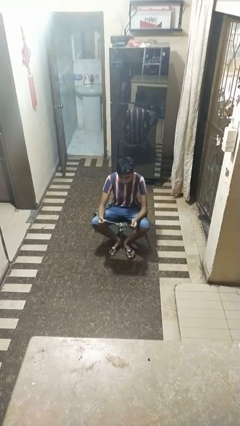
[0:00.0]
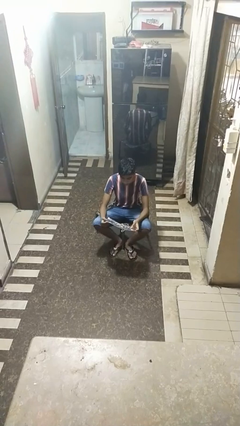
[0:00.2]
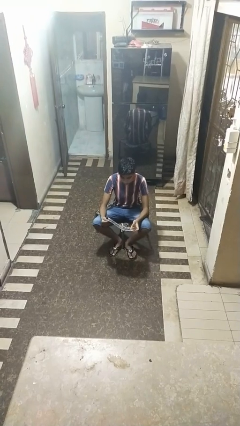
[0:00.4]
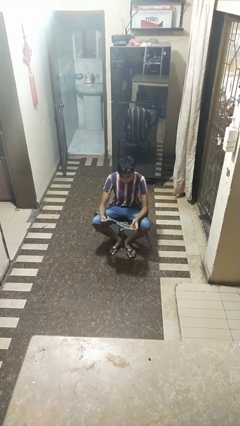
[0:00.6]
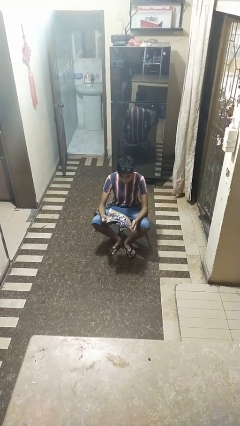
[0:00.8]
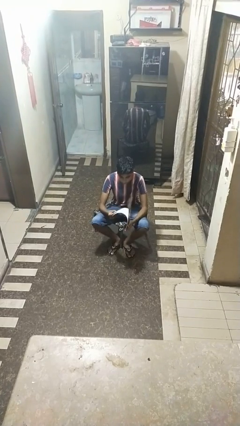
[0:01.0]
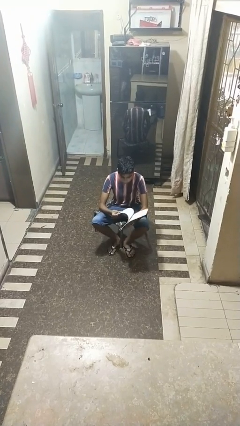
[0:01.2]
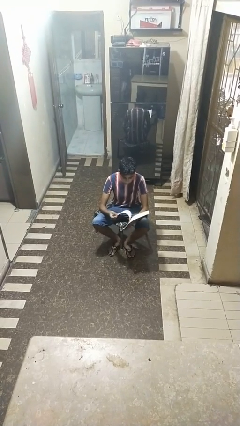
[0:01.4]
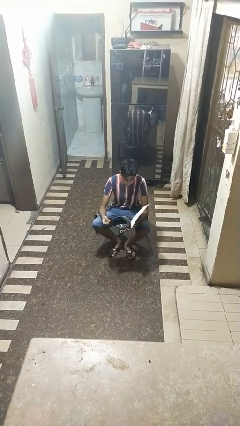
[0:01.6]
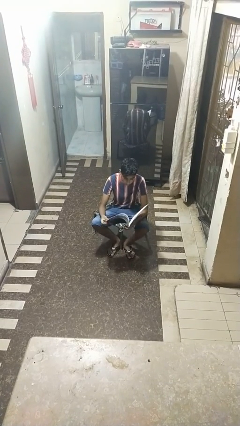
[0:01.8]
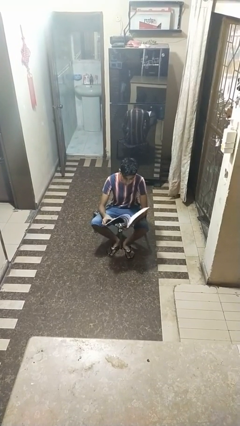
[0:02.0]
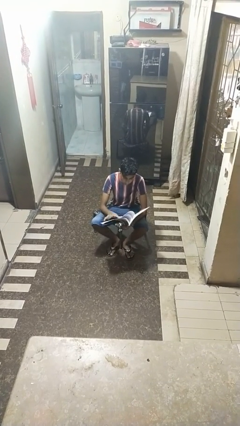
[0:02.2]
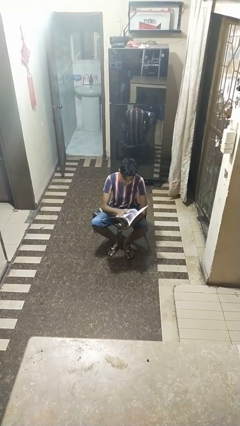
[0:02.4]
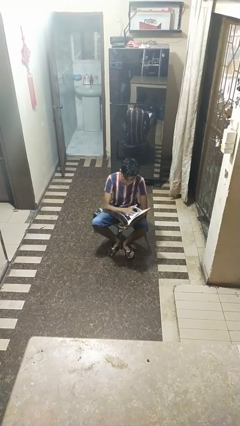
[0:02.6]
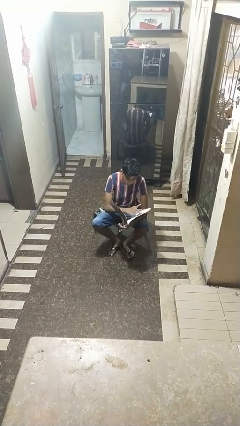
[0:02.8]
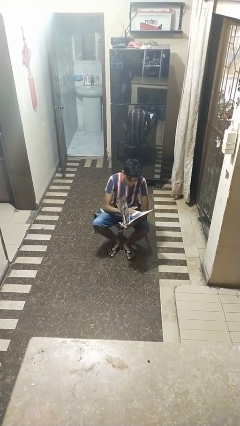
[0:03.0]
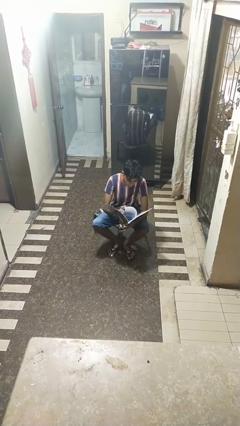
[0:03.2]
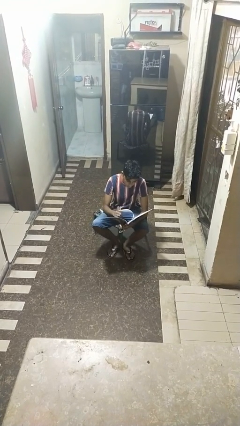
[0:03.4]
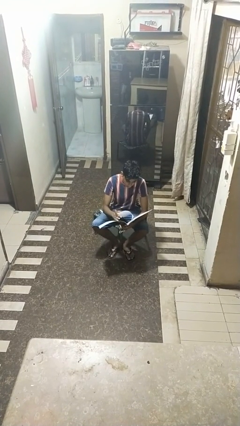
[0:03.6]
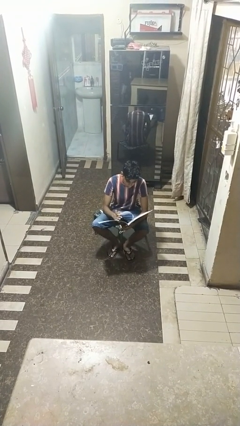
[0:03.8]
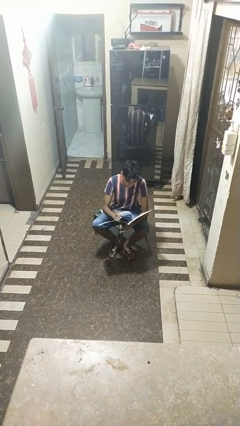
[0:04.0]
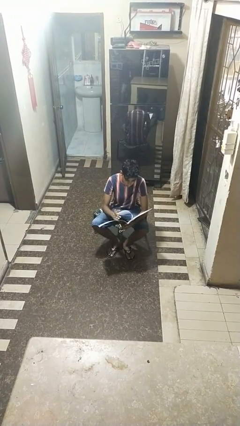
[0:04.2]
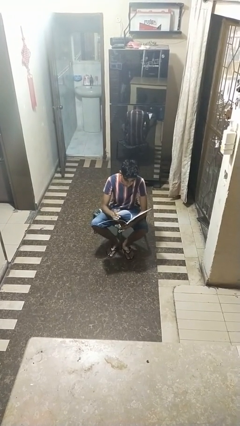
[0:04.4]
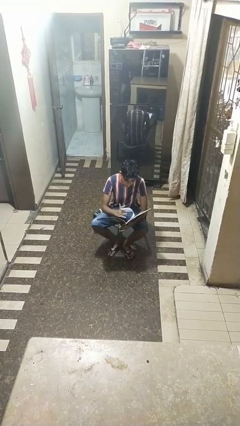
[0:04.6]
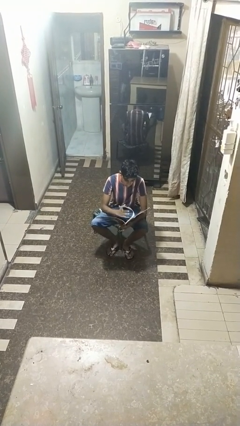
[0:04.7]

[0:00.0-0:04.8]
person reads magazine

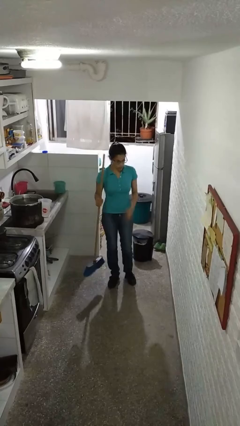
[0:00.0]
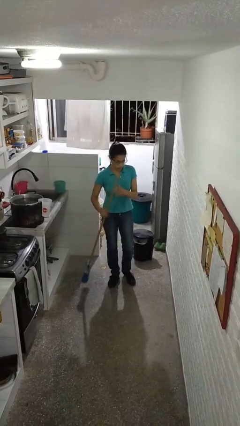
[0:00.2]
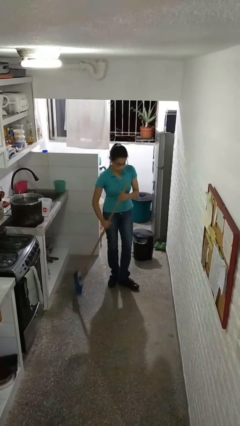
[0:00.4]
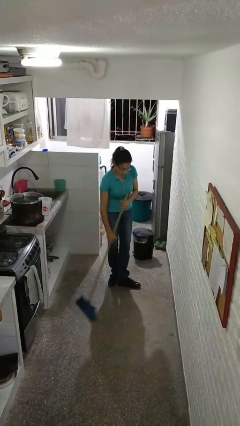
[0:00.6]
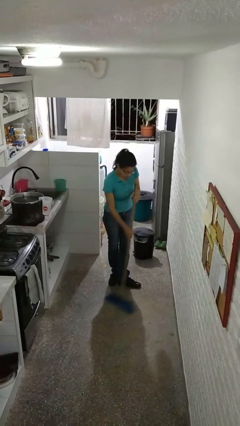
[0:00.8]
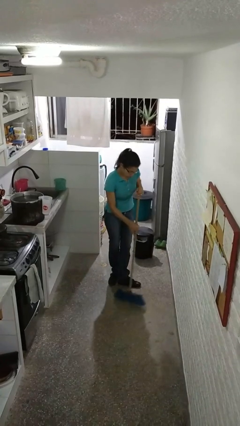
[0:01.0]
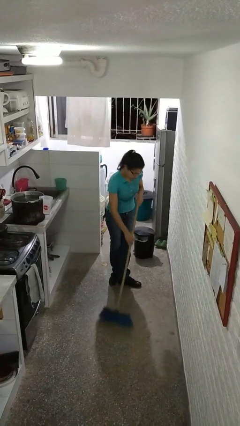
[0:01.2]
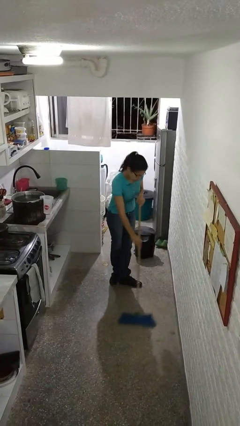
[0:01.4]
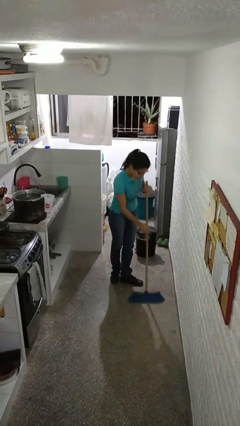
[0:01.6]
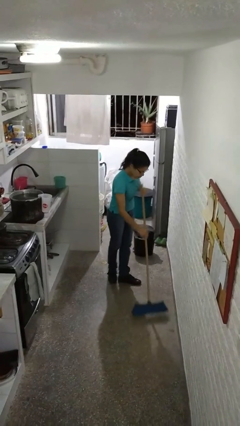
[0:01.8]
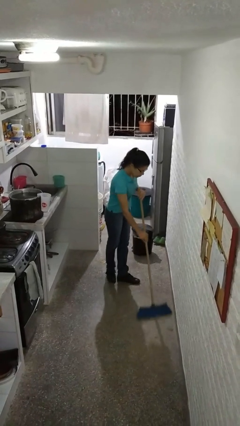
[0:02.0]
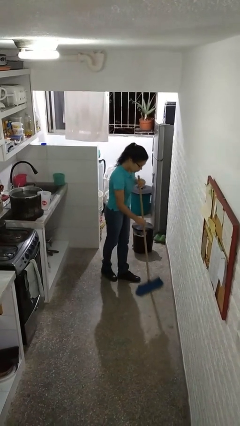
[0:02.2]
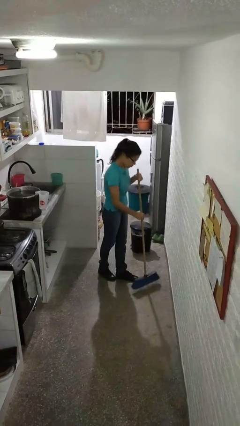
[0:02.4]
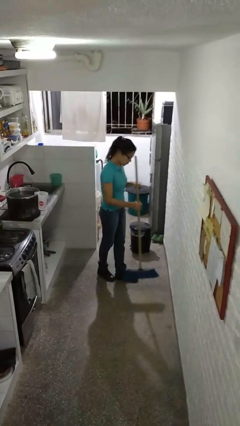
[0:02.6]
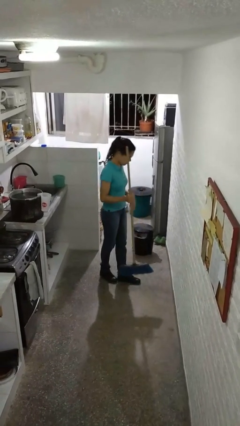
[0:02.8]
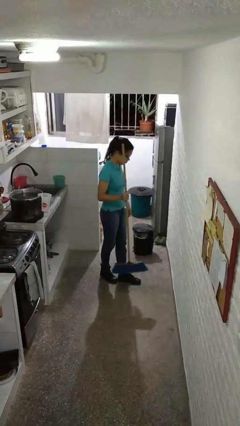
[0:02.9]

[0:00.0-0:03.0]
person sweeps floor

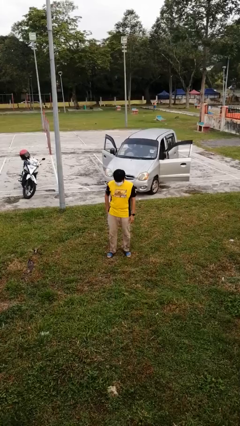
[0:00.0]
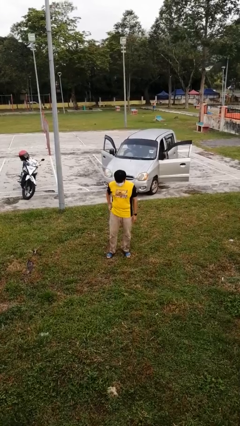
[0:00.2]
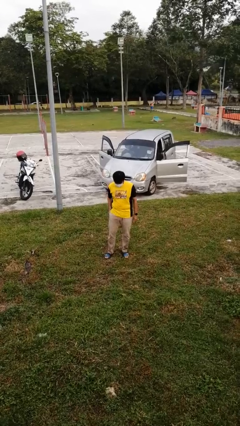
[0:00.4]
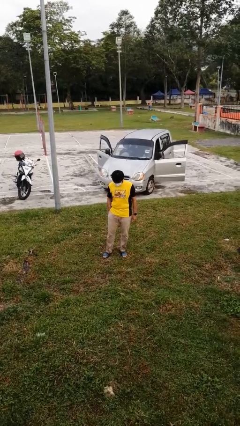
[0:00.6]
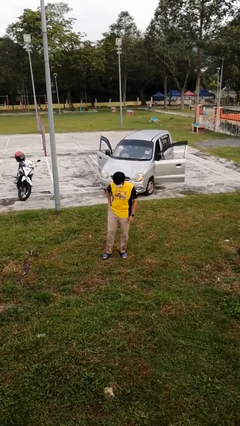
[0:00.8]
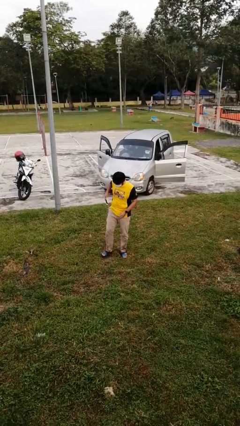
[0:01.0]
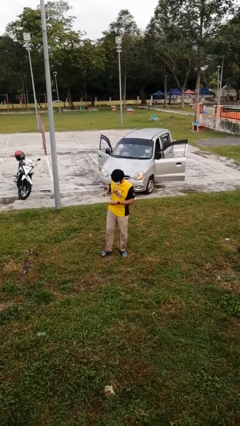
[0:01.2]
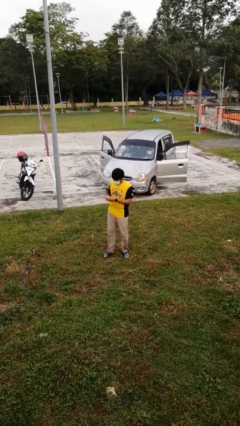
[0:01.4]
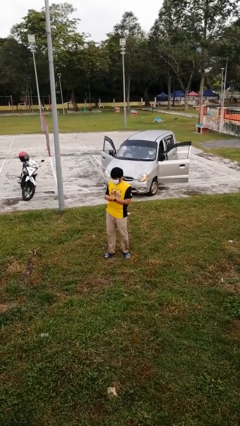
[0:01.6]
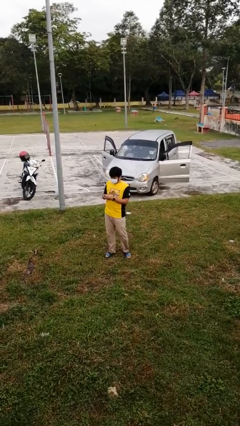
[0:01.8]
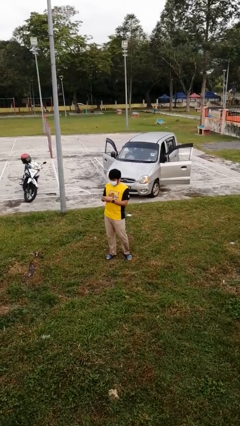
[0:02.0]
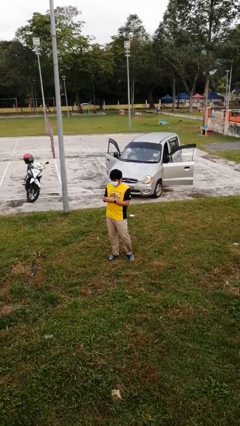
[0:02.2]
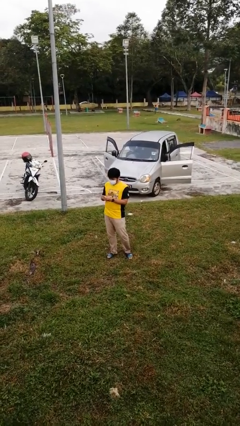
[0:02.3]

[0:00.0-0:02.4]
person takes phone from pocket

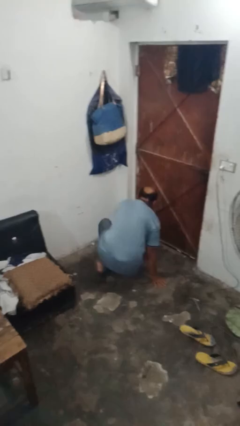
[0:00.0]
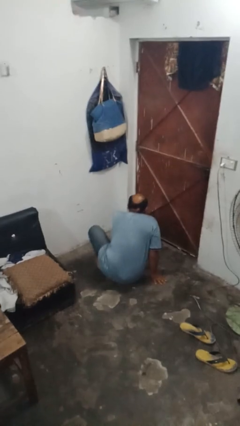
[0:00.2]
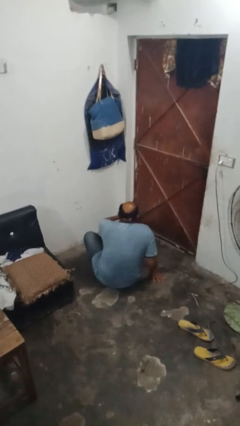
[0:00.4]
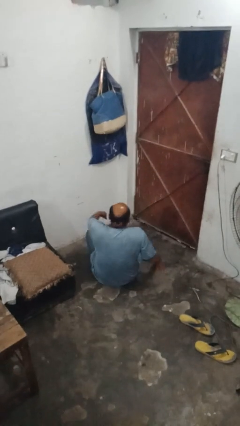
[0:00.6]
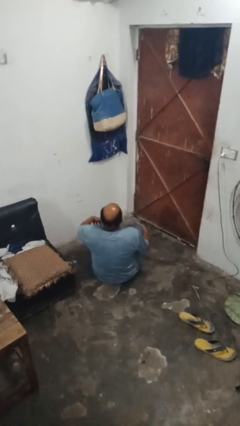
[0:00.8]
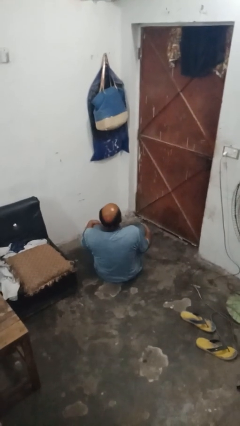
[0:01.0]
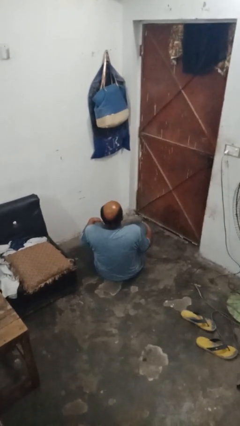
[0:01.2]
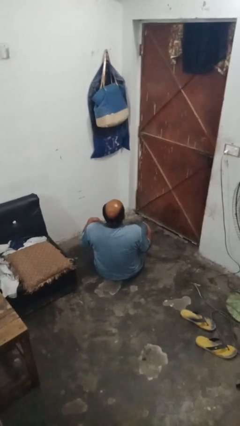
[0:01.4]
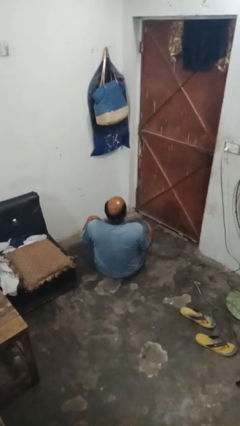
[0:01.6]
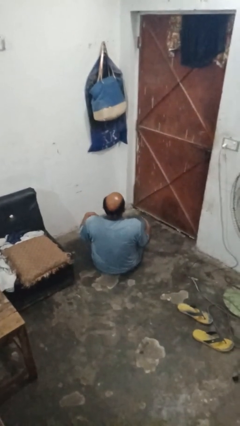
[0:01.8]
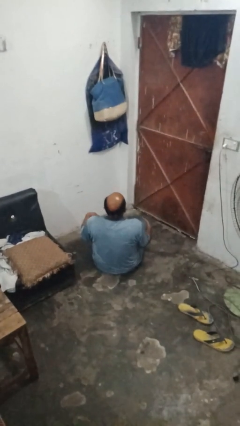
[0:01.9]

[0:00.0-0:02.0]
person sits crisscross

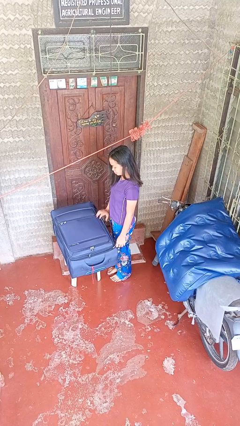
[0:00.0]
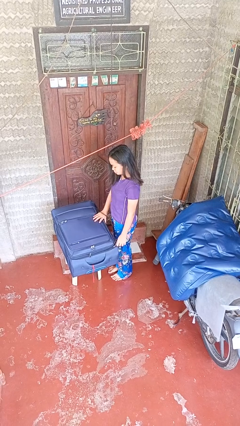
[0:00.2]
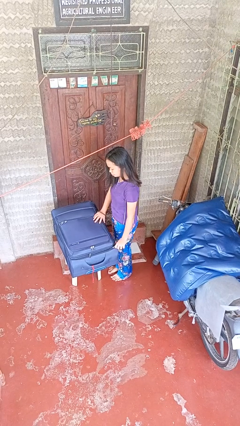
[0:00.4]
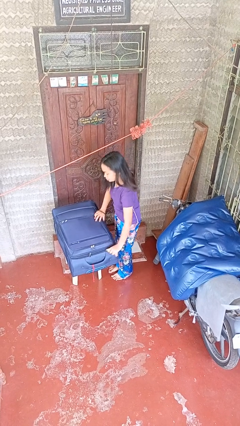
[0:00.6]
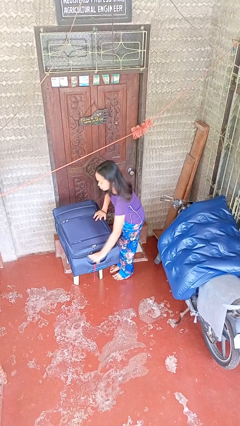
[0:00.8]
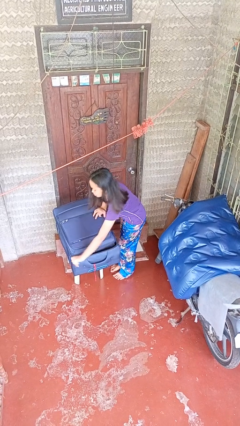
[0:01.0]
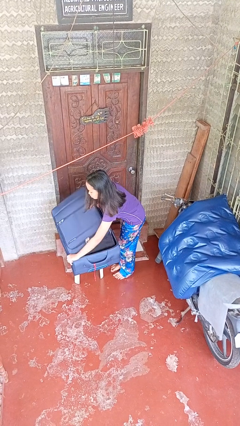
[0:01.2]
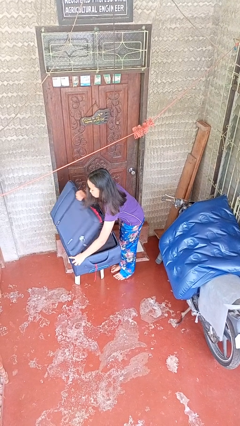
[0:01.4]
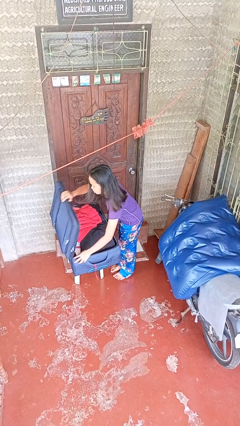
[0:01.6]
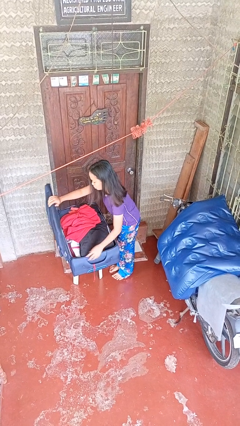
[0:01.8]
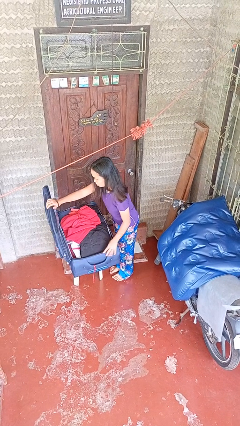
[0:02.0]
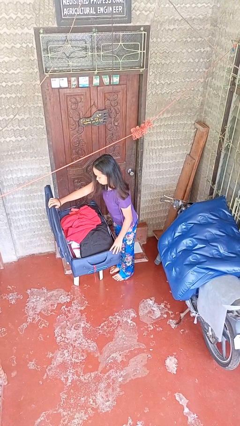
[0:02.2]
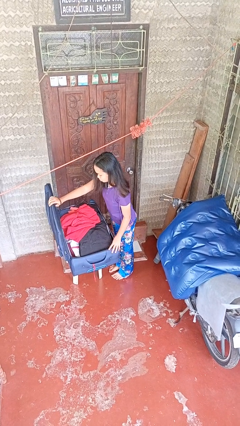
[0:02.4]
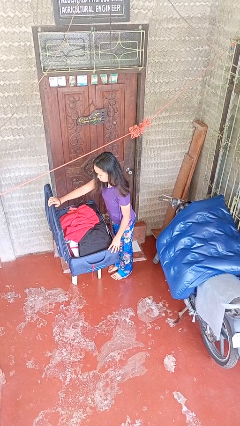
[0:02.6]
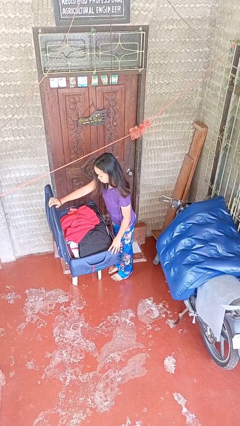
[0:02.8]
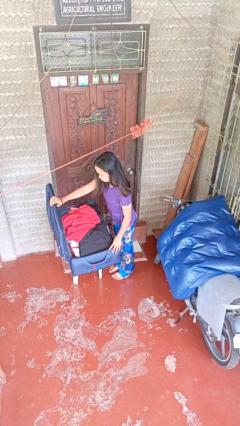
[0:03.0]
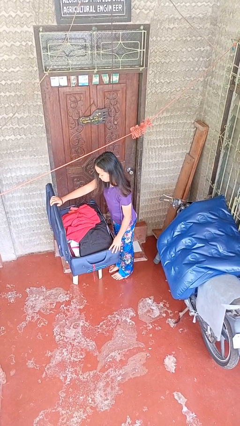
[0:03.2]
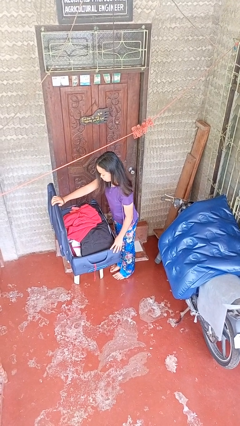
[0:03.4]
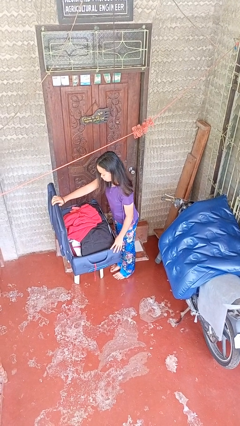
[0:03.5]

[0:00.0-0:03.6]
person opens suitcase

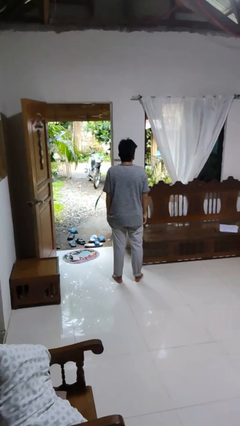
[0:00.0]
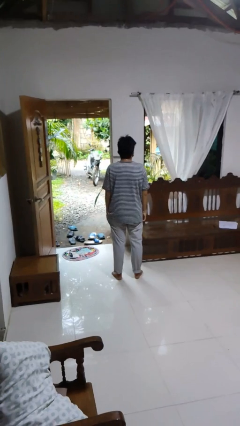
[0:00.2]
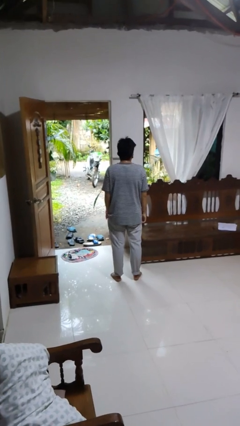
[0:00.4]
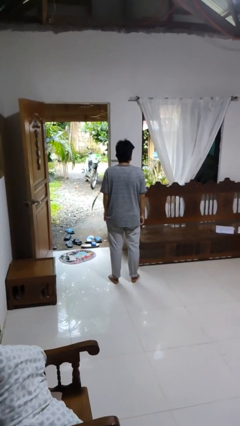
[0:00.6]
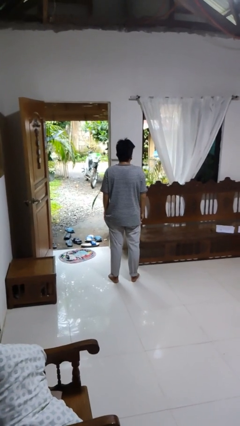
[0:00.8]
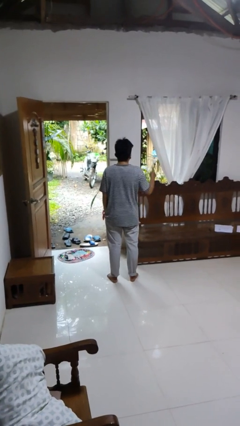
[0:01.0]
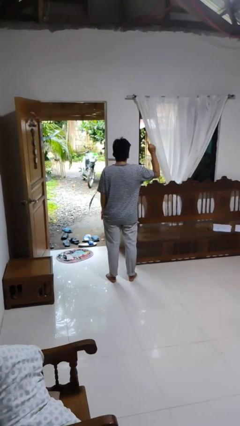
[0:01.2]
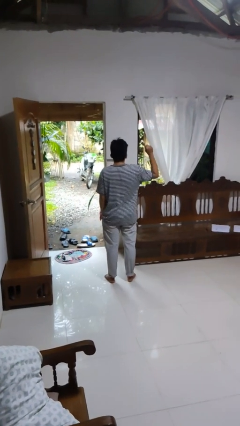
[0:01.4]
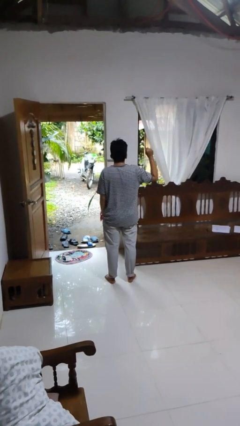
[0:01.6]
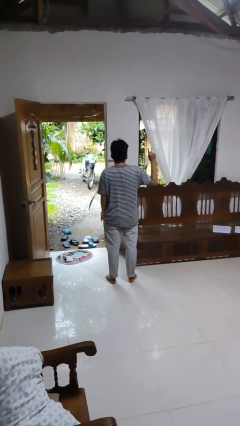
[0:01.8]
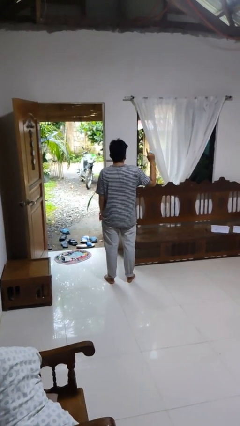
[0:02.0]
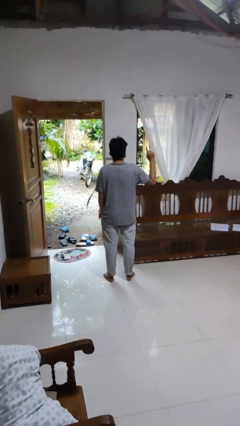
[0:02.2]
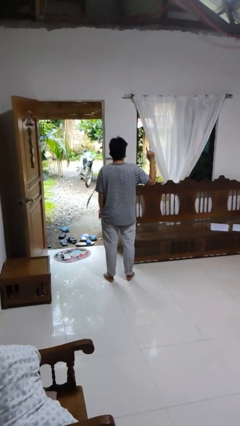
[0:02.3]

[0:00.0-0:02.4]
person gestures number one
